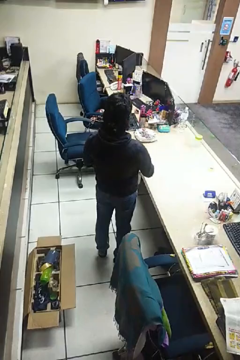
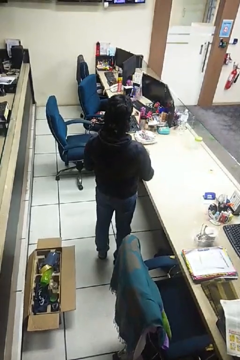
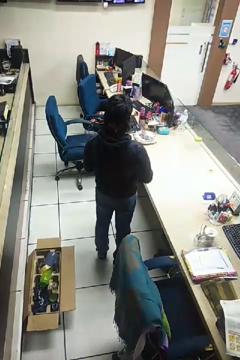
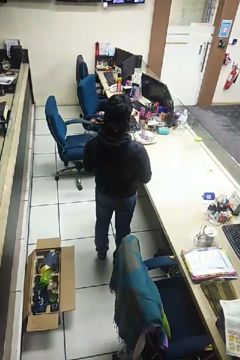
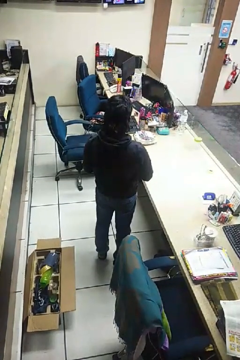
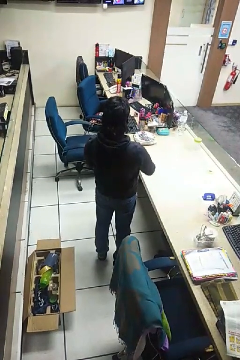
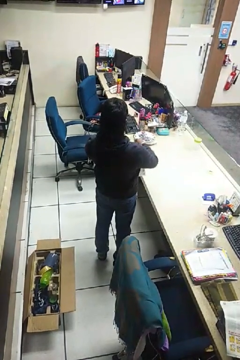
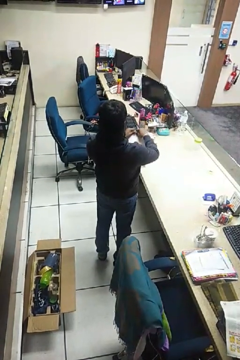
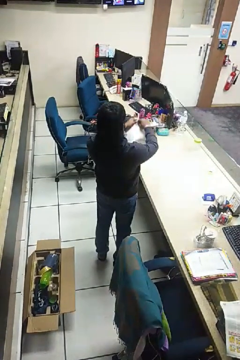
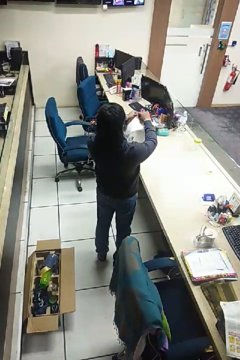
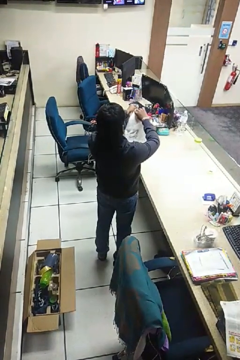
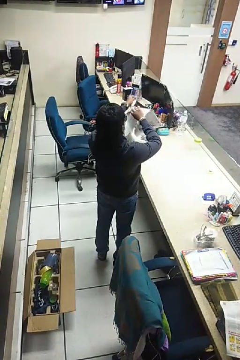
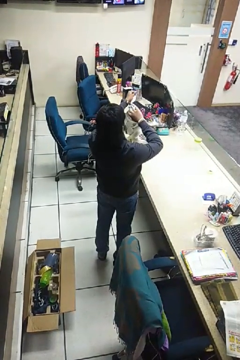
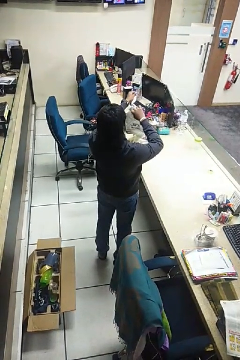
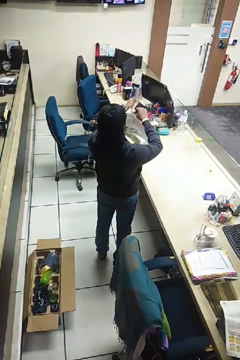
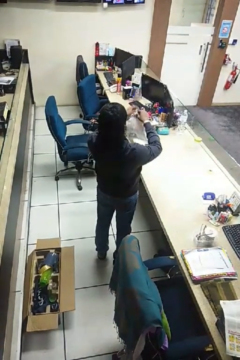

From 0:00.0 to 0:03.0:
person tears paper

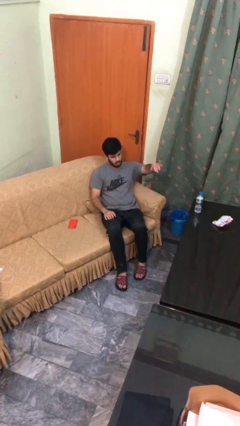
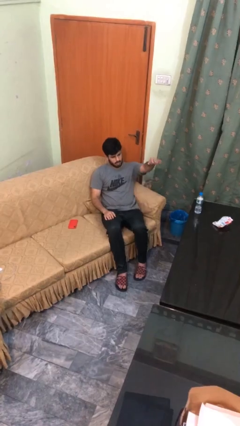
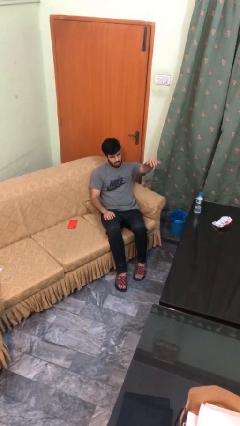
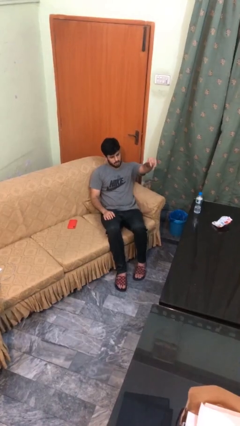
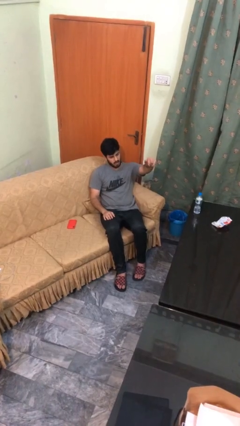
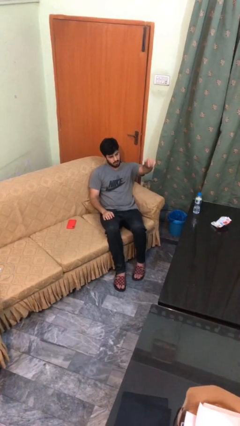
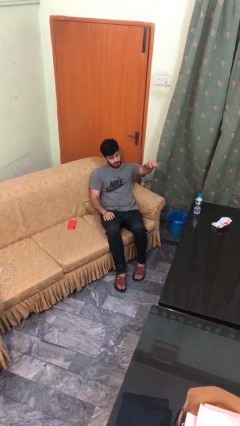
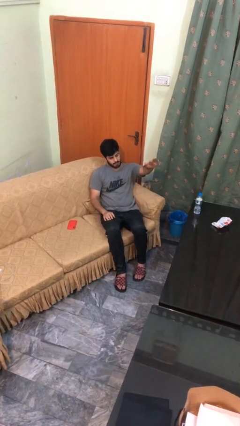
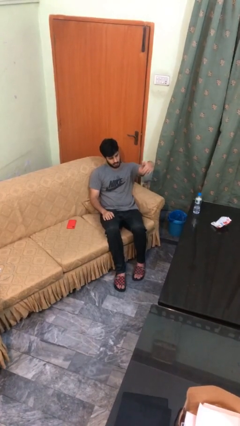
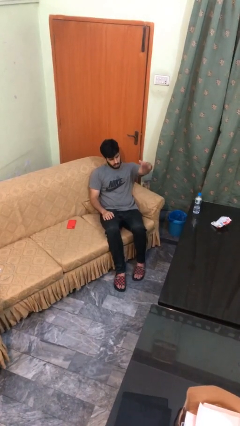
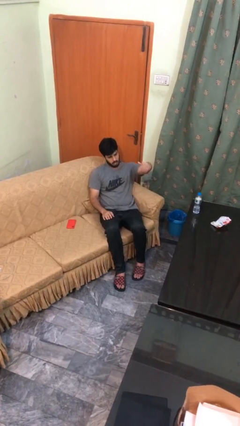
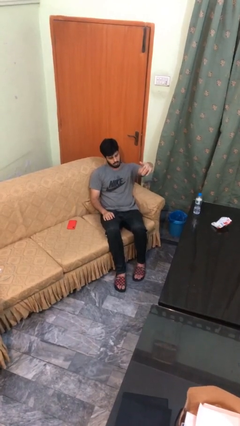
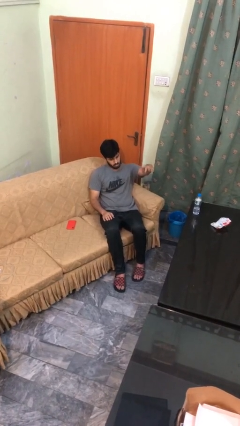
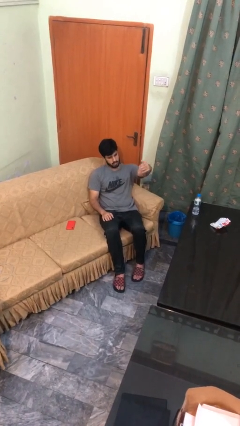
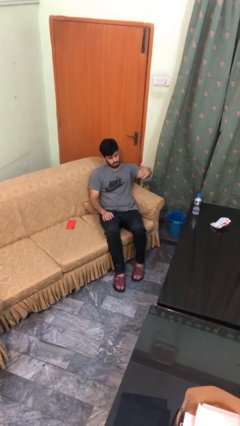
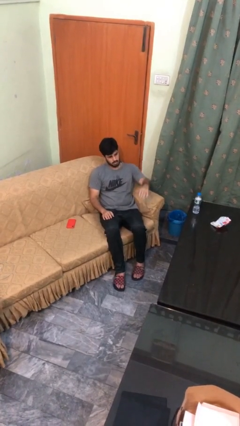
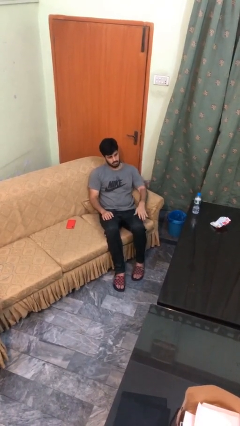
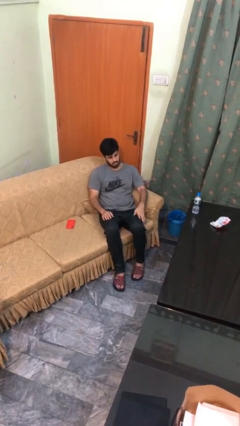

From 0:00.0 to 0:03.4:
person gestures come here

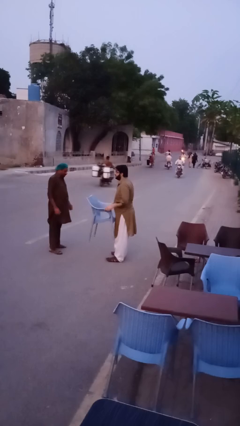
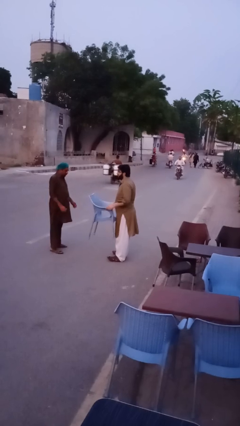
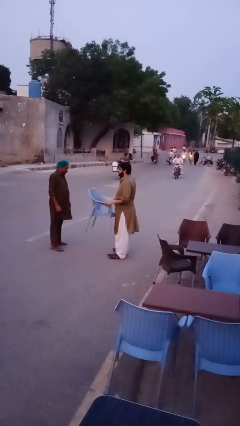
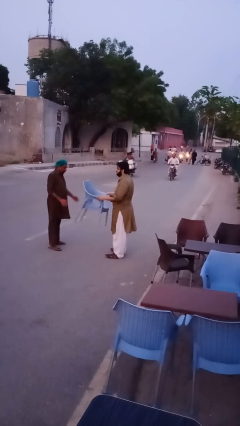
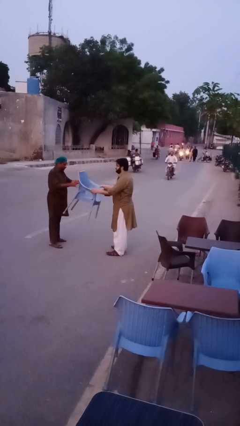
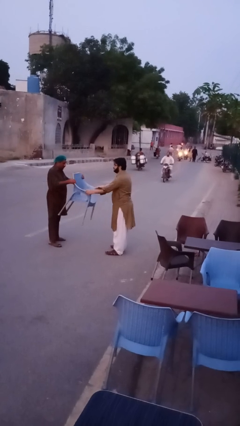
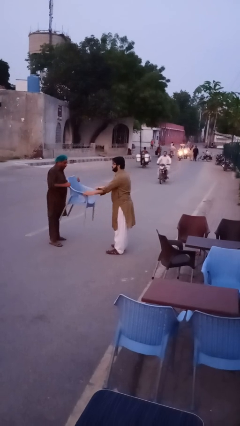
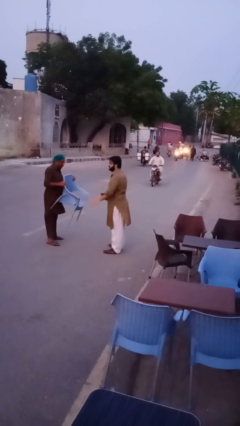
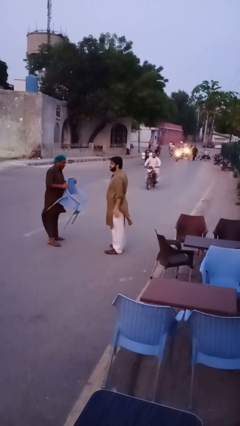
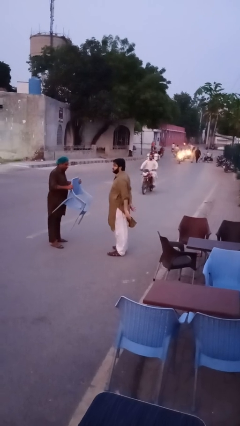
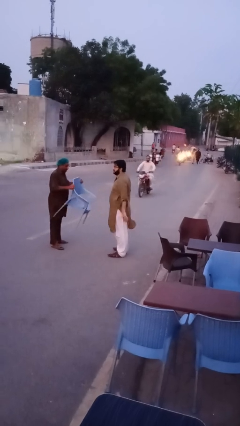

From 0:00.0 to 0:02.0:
person transfers object to person

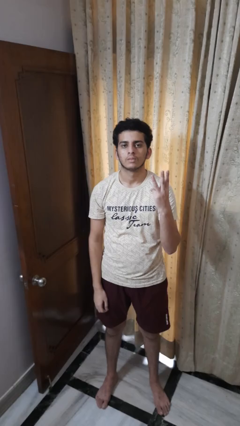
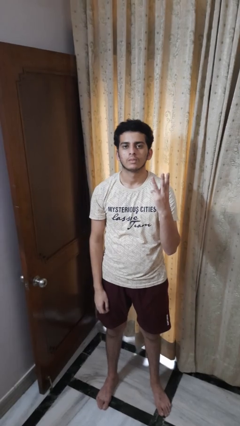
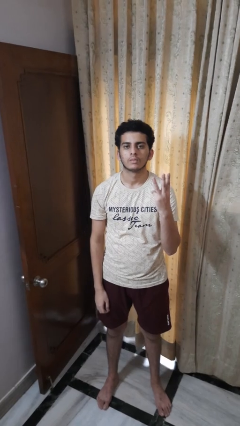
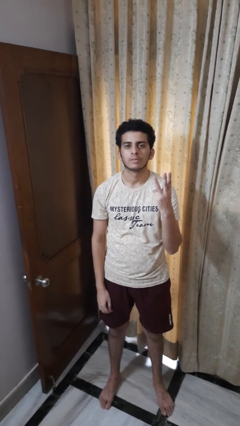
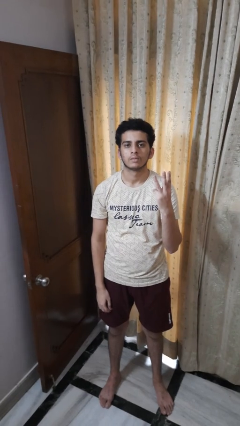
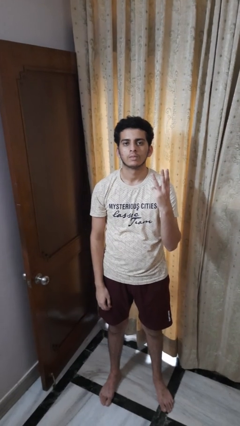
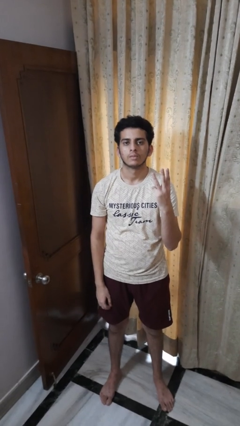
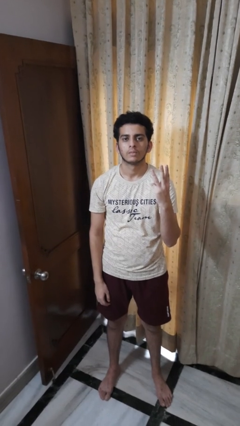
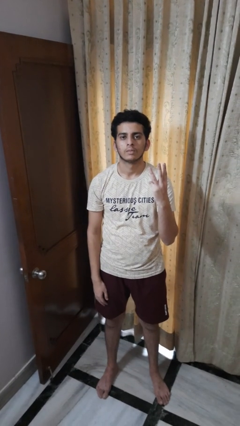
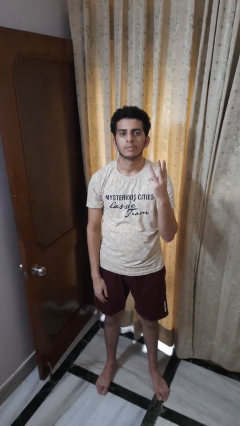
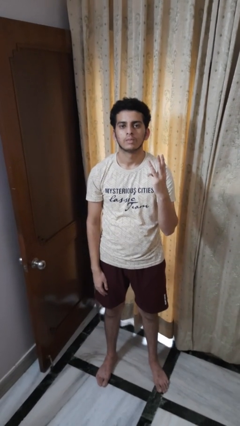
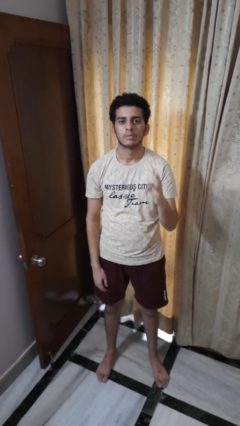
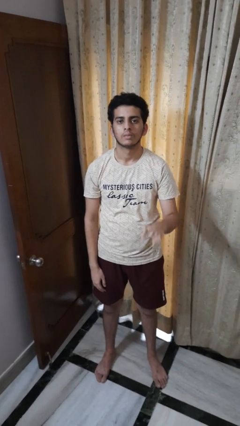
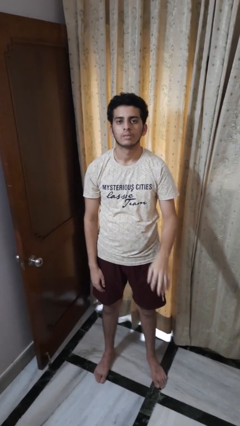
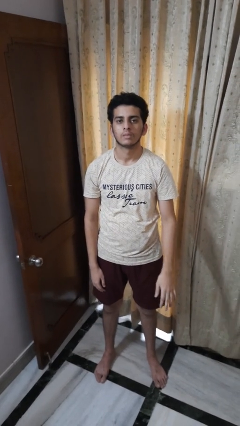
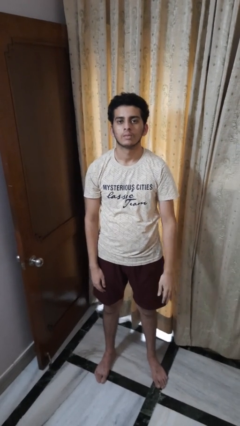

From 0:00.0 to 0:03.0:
person gestures number three

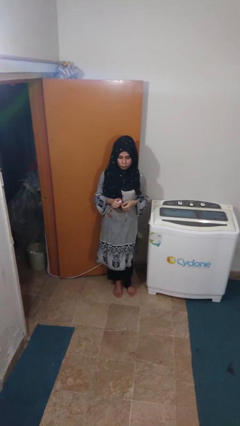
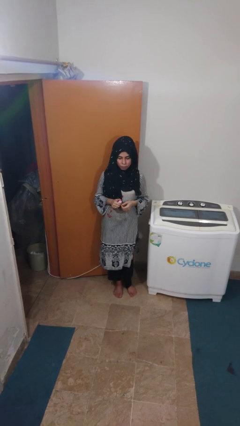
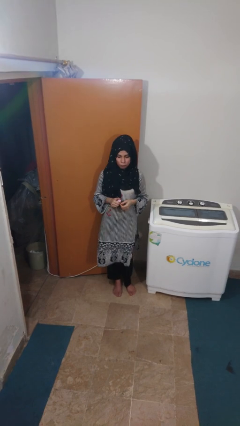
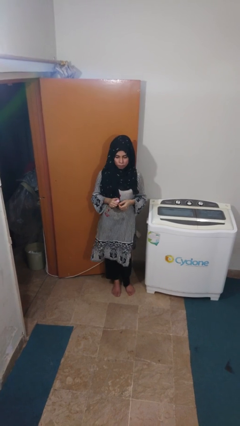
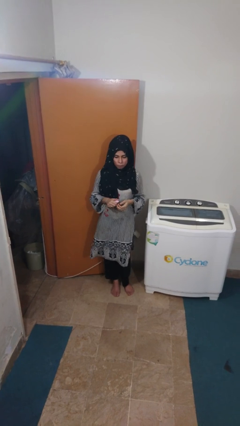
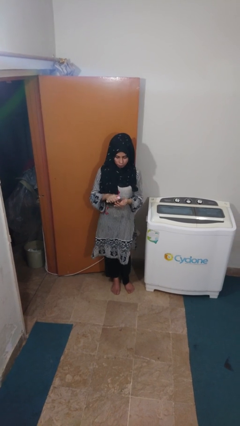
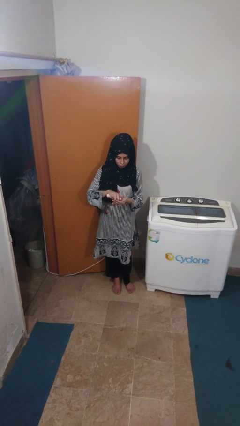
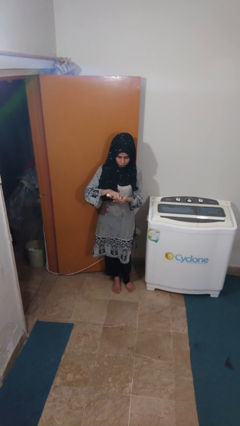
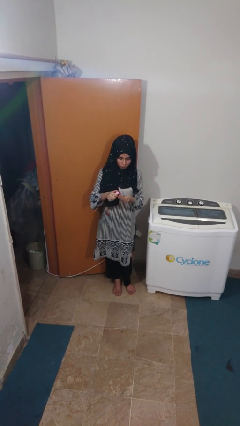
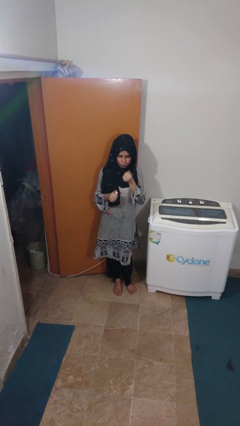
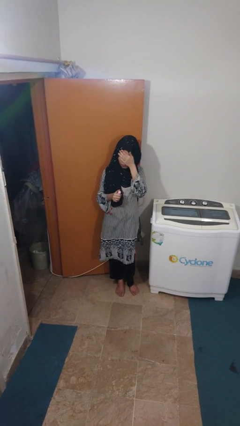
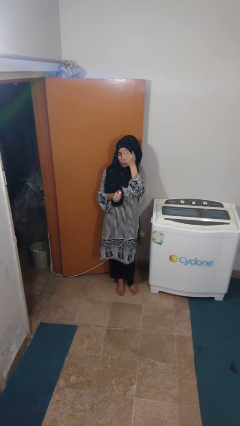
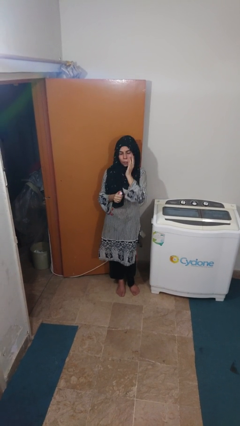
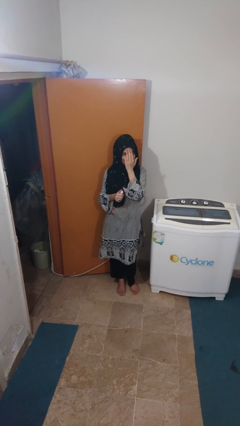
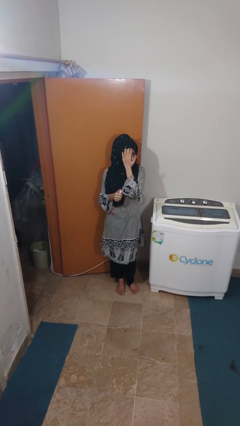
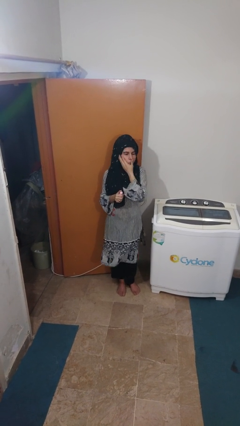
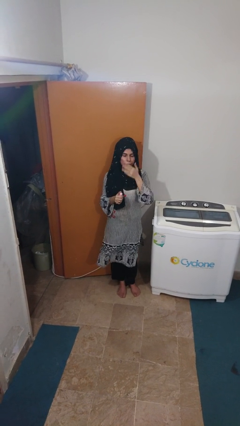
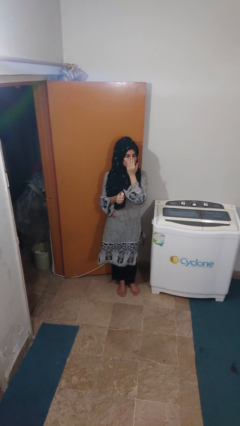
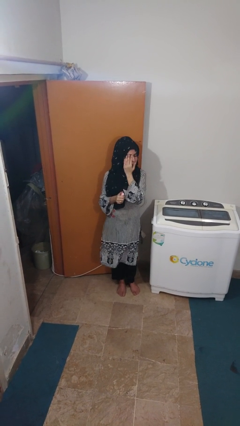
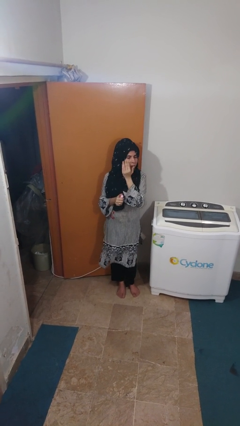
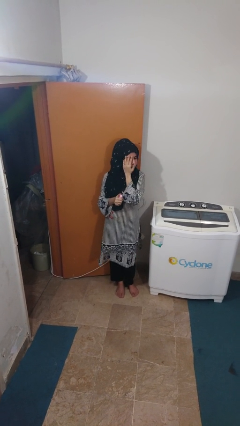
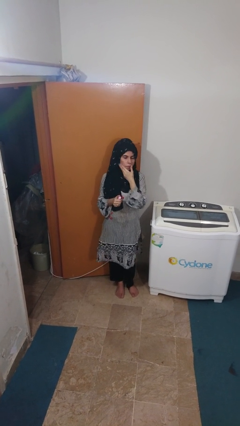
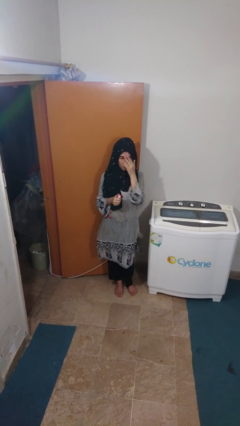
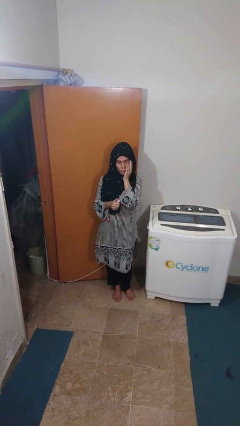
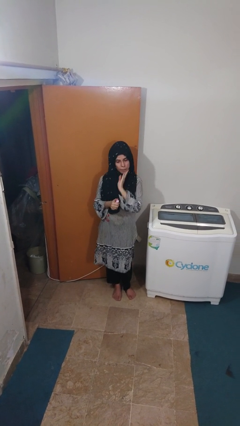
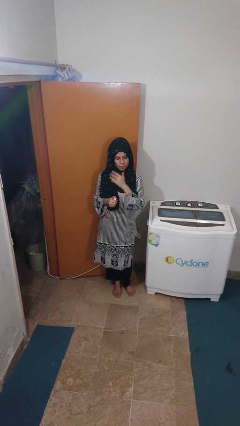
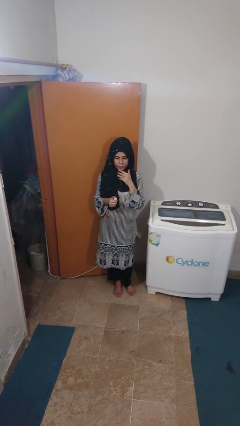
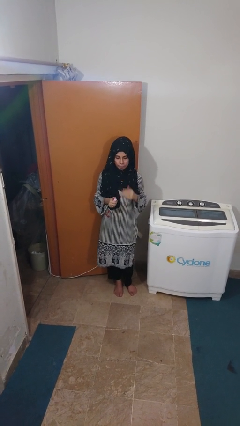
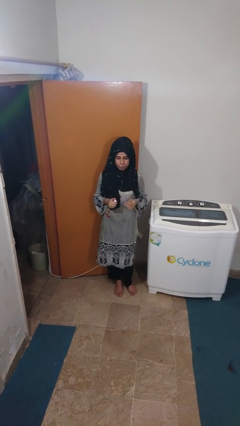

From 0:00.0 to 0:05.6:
person applies sunscreen

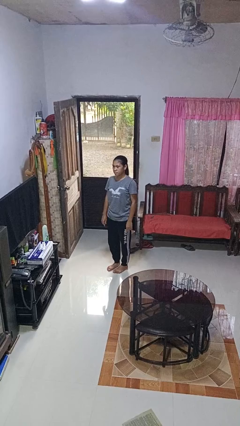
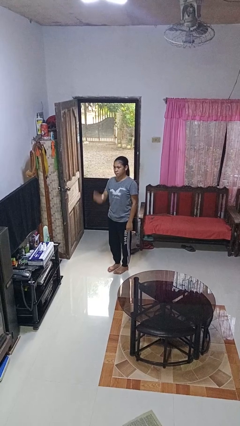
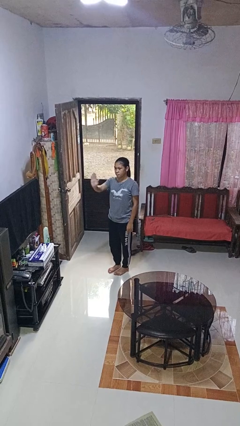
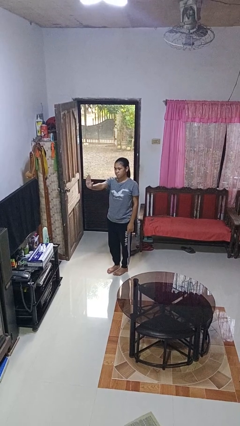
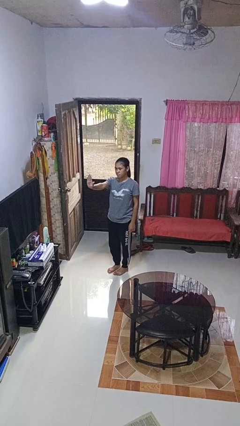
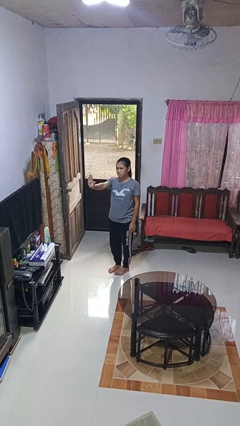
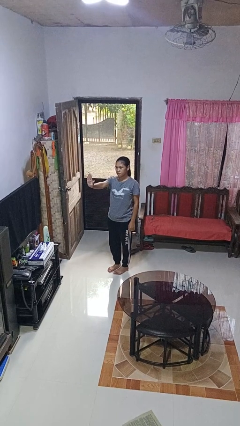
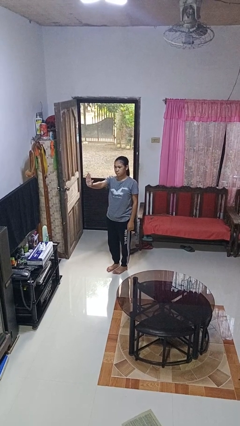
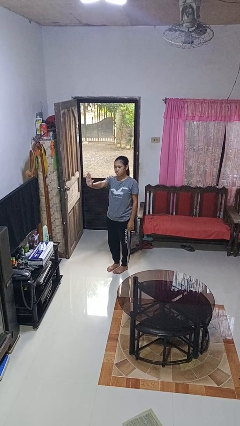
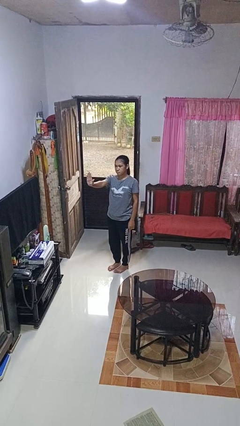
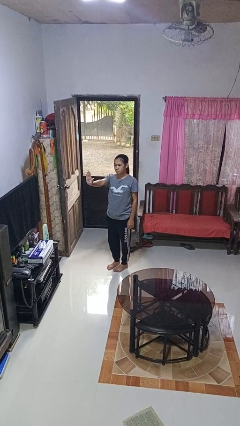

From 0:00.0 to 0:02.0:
person gestures stop
